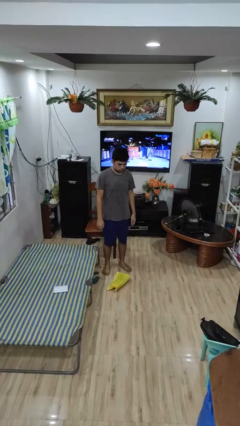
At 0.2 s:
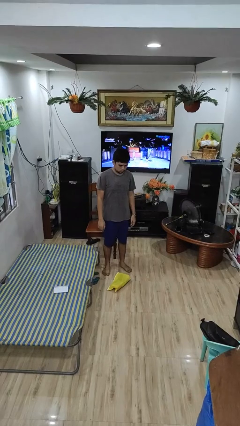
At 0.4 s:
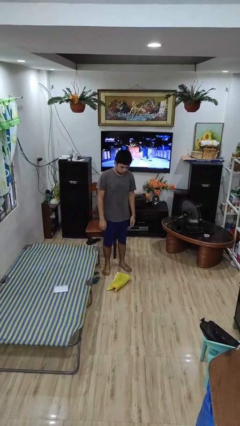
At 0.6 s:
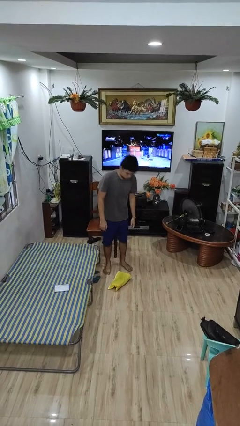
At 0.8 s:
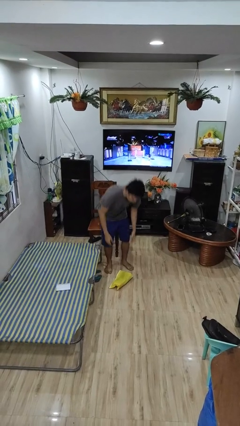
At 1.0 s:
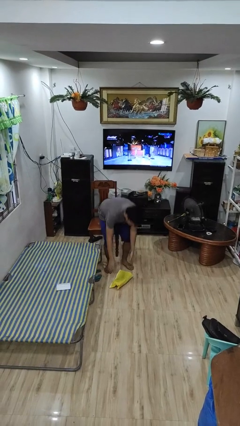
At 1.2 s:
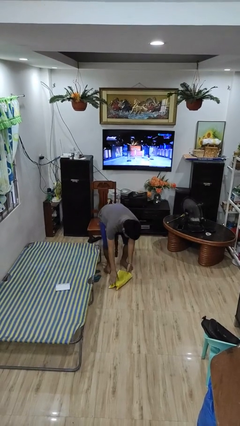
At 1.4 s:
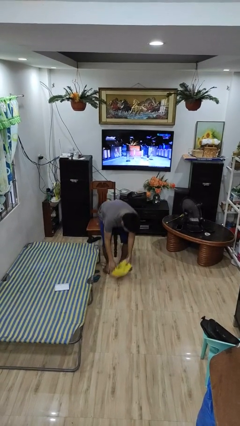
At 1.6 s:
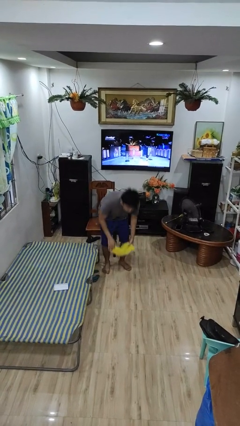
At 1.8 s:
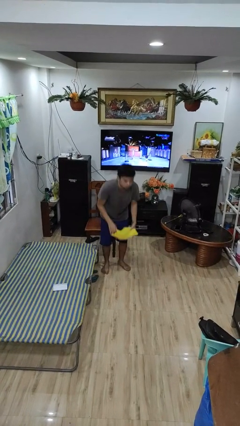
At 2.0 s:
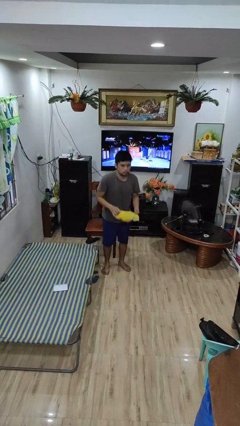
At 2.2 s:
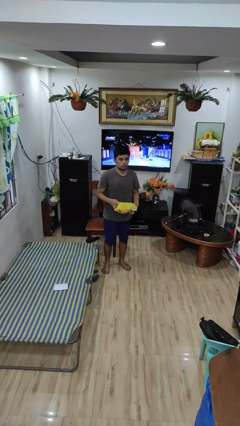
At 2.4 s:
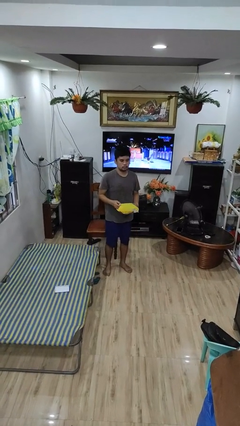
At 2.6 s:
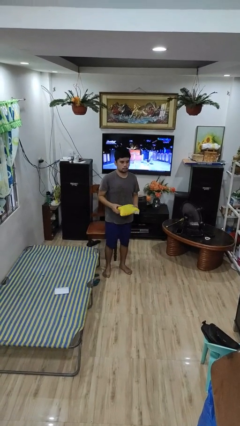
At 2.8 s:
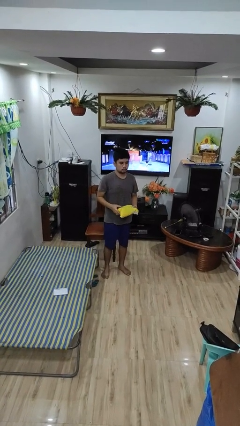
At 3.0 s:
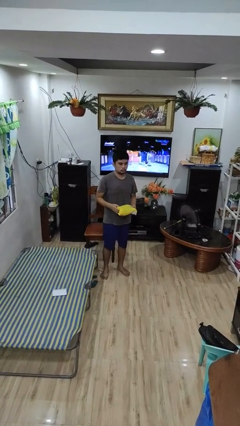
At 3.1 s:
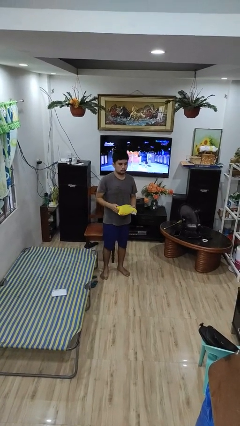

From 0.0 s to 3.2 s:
person picks up object from floor

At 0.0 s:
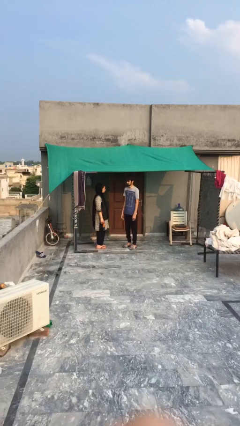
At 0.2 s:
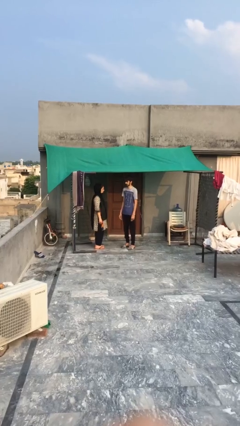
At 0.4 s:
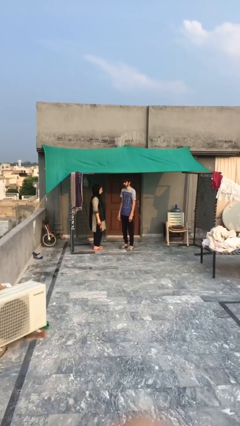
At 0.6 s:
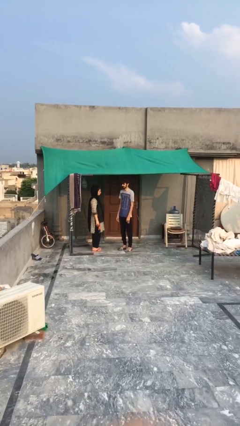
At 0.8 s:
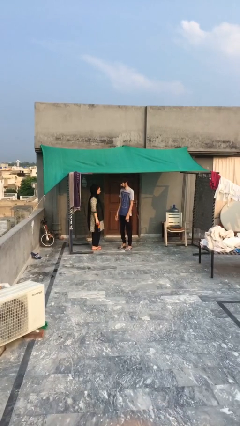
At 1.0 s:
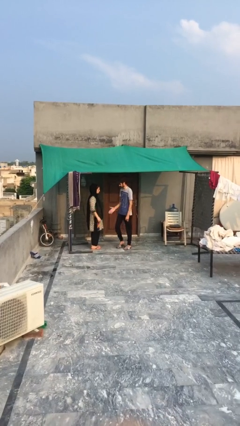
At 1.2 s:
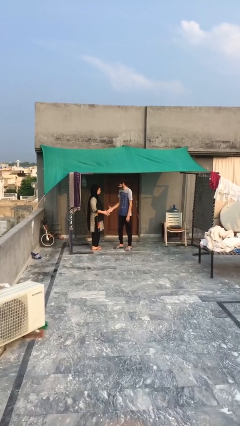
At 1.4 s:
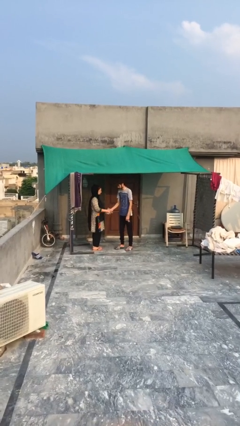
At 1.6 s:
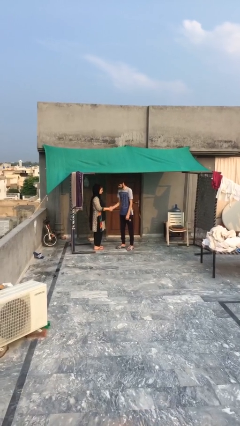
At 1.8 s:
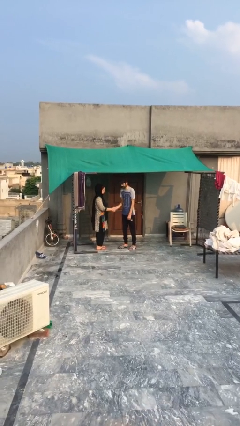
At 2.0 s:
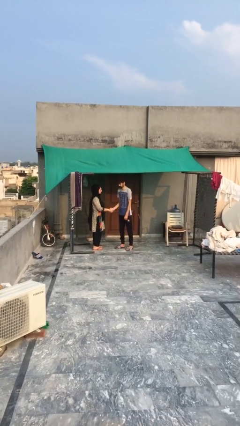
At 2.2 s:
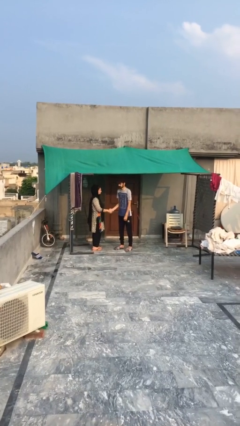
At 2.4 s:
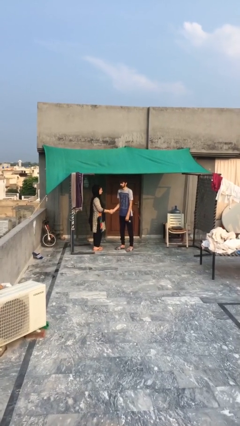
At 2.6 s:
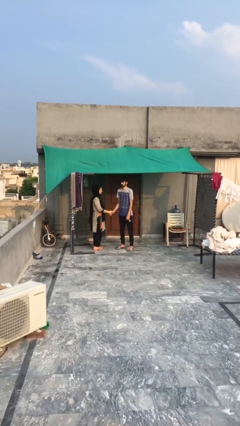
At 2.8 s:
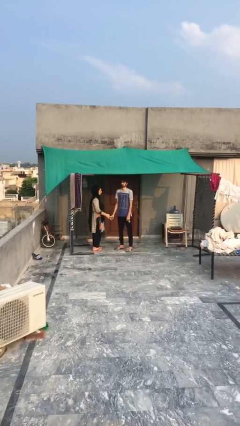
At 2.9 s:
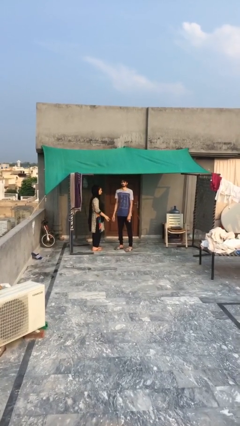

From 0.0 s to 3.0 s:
person shakes hand

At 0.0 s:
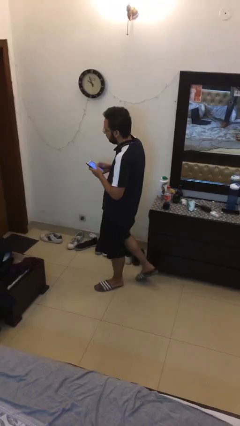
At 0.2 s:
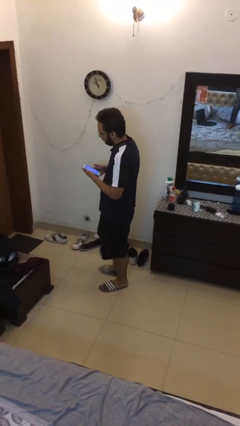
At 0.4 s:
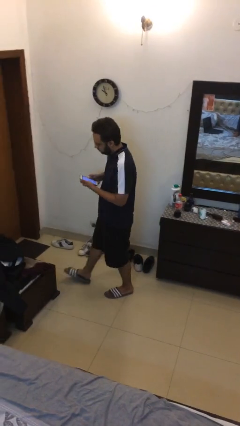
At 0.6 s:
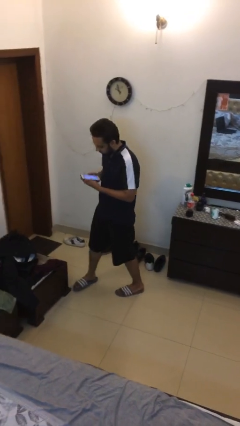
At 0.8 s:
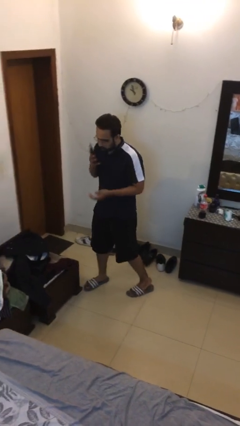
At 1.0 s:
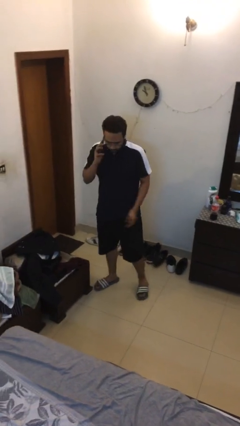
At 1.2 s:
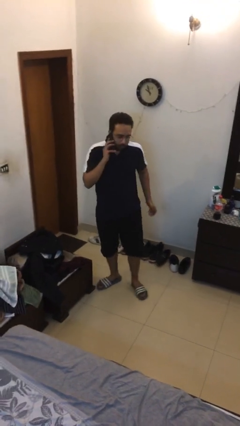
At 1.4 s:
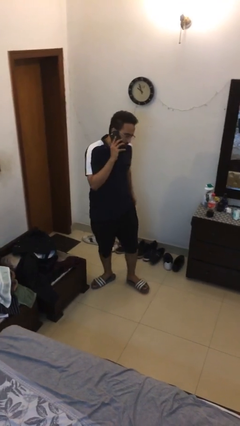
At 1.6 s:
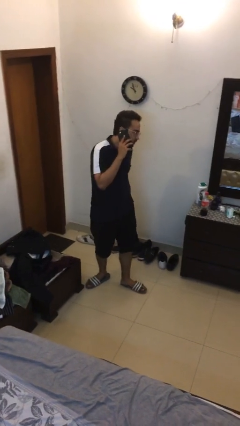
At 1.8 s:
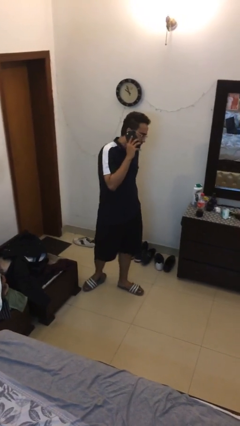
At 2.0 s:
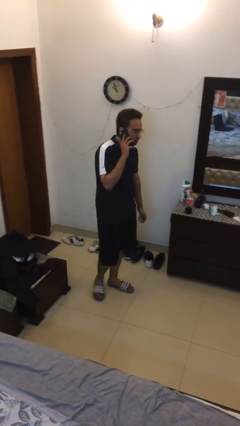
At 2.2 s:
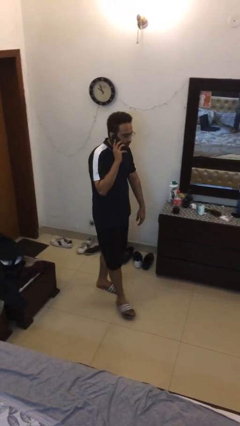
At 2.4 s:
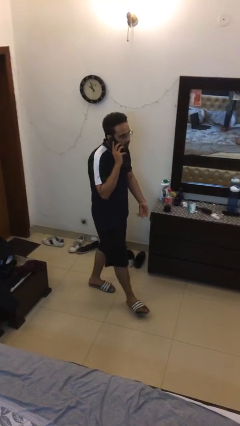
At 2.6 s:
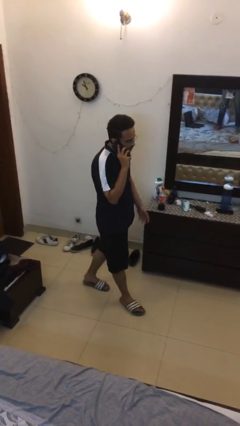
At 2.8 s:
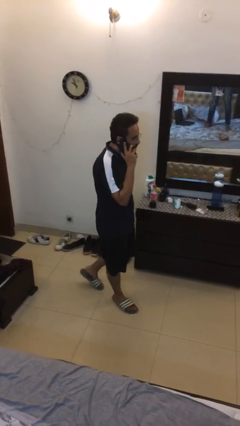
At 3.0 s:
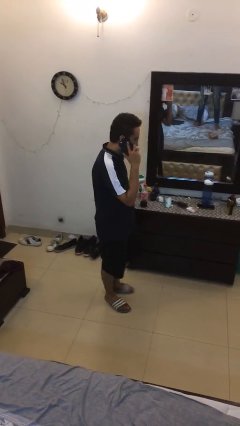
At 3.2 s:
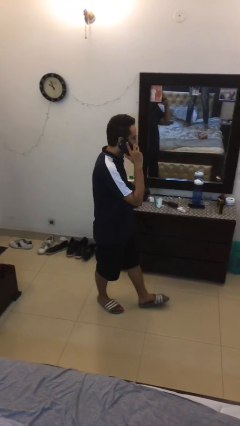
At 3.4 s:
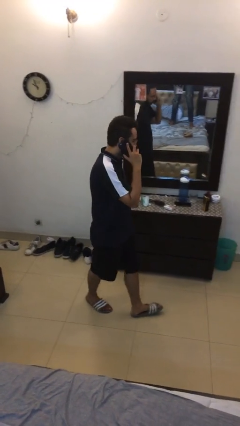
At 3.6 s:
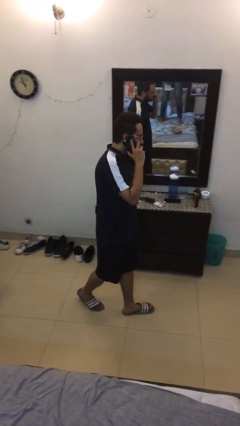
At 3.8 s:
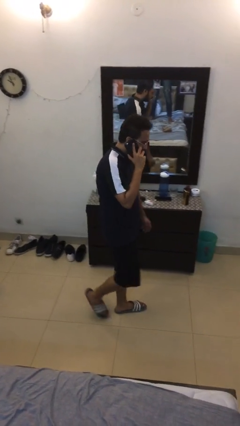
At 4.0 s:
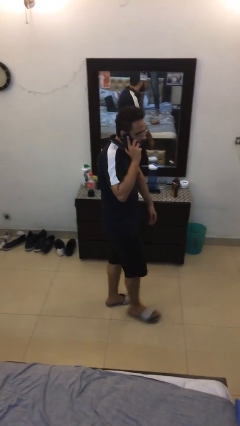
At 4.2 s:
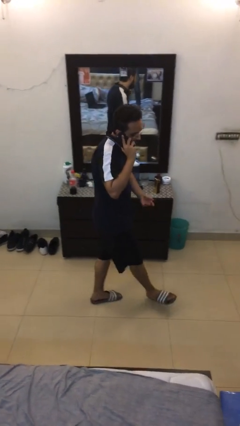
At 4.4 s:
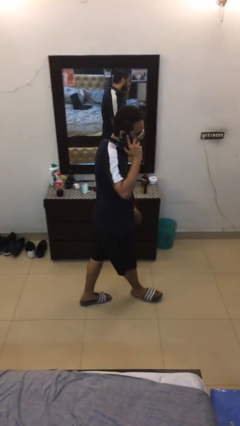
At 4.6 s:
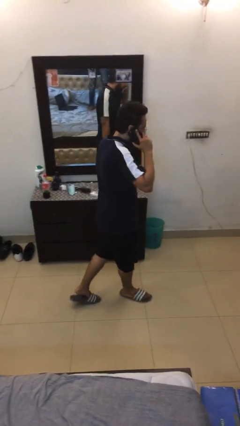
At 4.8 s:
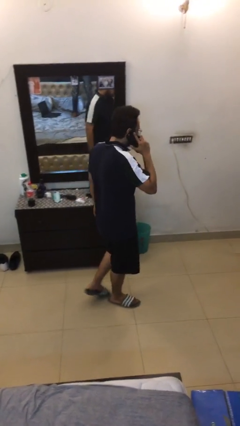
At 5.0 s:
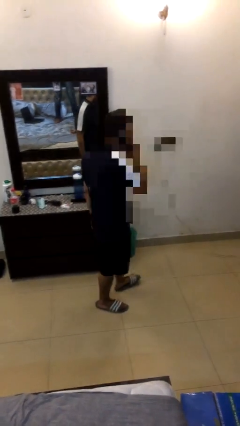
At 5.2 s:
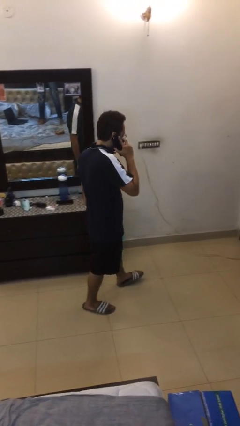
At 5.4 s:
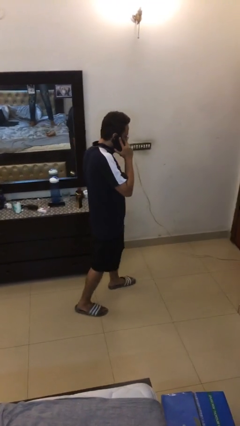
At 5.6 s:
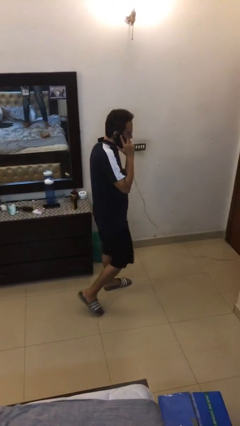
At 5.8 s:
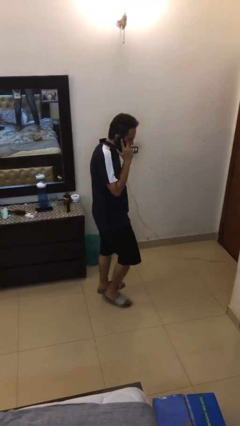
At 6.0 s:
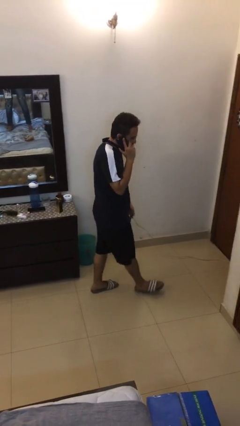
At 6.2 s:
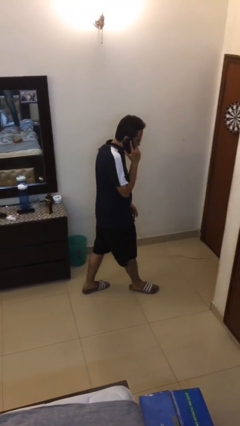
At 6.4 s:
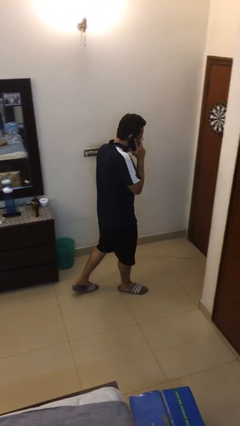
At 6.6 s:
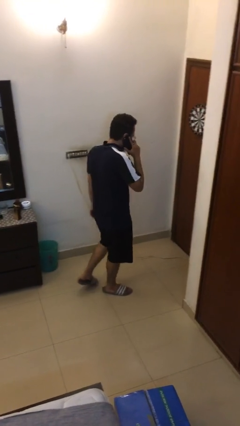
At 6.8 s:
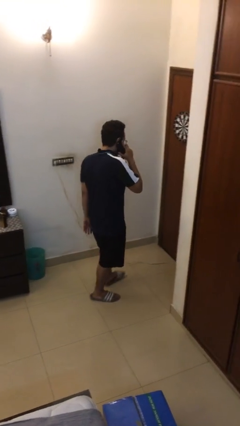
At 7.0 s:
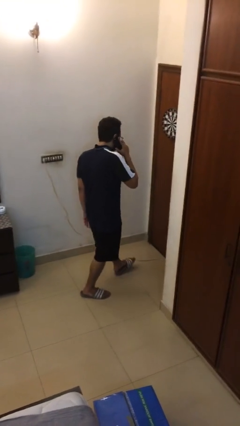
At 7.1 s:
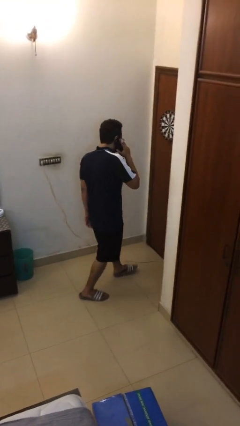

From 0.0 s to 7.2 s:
person talks on phone

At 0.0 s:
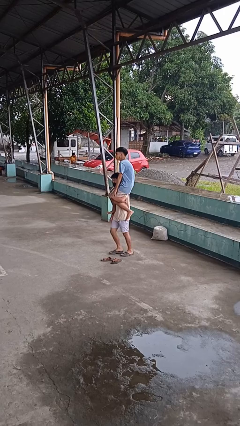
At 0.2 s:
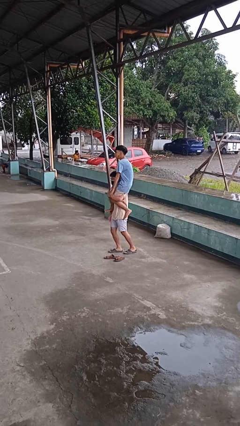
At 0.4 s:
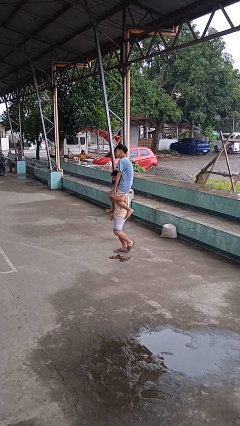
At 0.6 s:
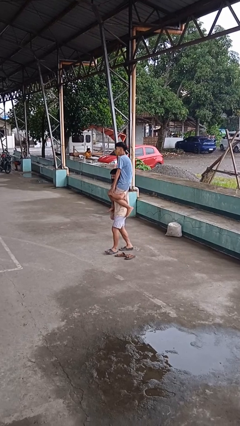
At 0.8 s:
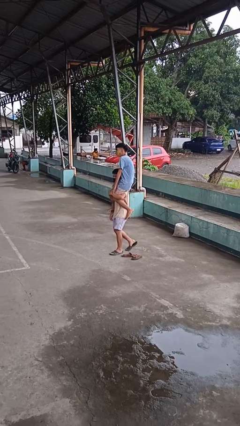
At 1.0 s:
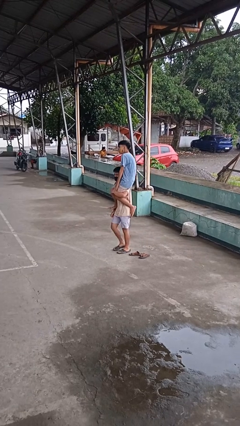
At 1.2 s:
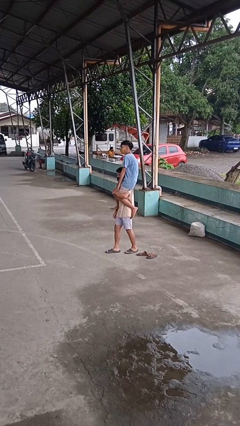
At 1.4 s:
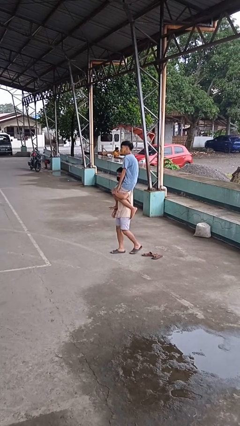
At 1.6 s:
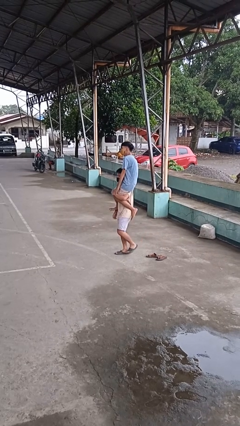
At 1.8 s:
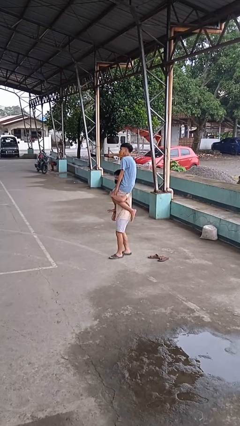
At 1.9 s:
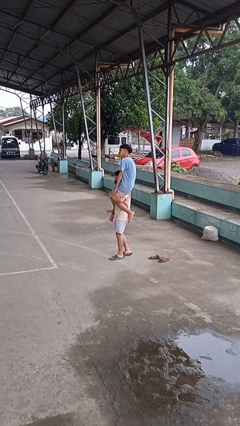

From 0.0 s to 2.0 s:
person carries person on shoulders

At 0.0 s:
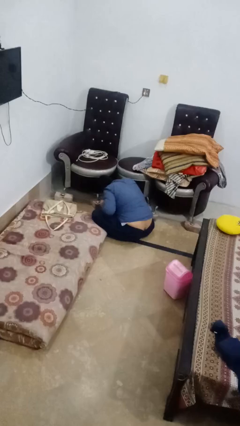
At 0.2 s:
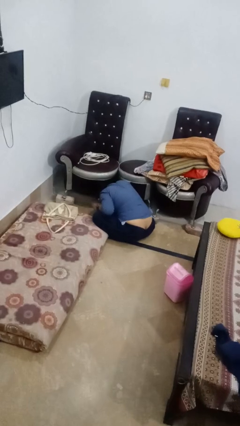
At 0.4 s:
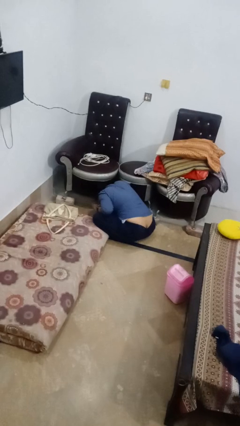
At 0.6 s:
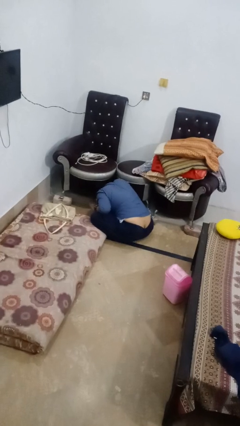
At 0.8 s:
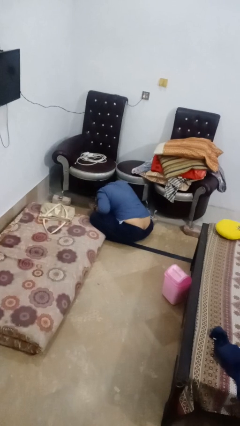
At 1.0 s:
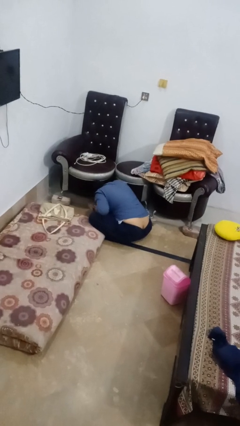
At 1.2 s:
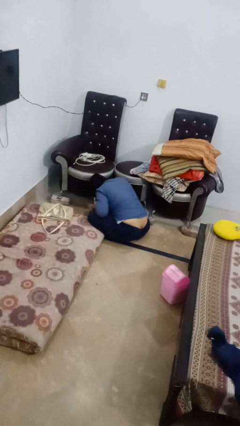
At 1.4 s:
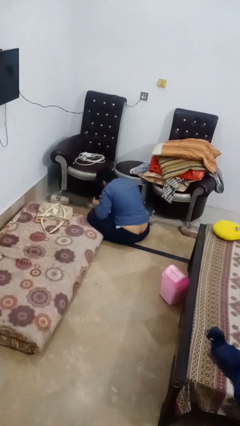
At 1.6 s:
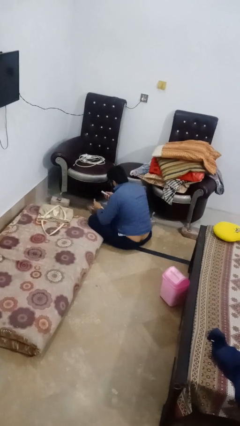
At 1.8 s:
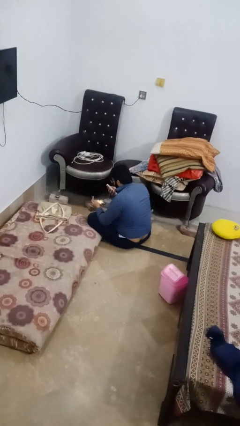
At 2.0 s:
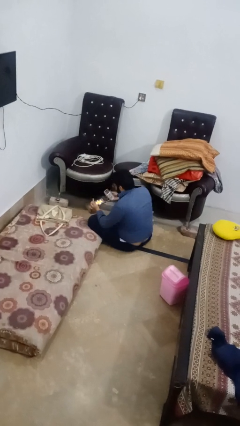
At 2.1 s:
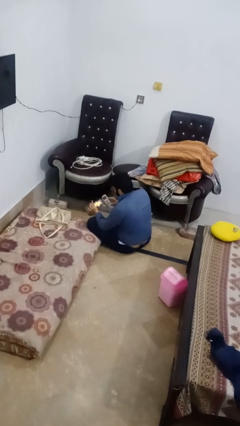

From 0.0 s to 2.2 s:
person searches under couch
